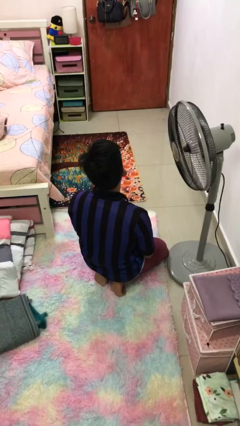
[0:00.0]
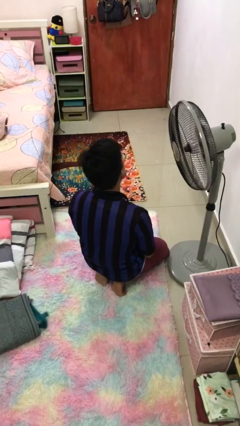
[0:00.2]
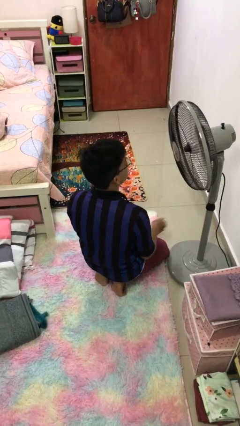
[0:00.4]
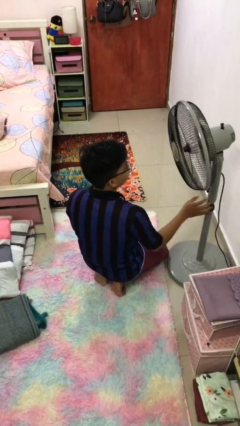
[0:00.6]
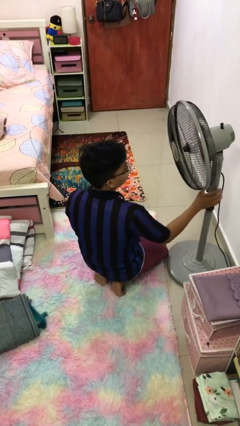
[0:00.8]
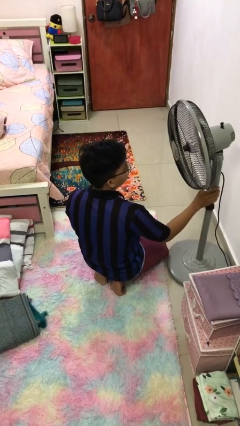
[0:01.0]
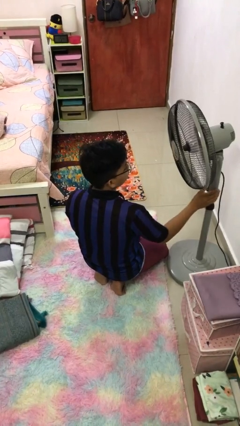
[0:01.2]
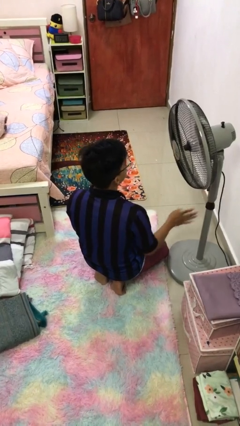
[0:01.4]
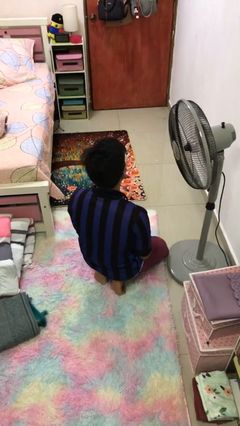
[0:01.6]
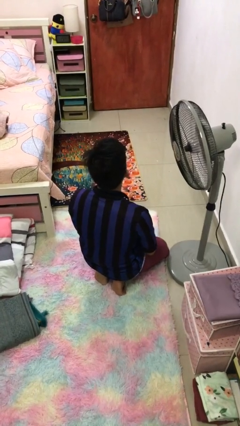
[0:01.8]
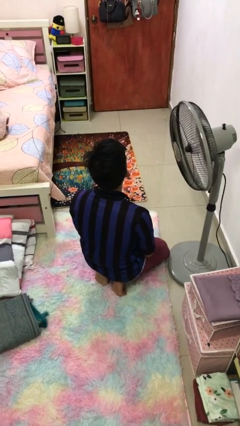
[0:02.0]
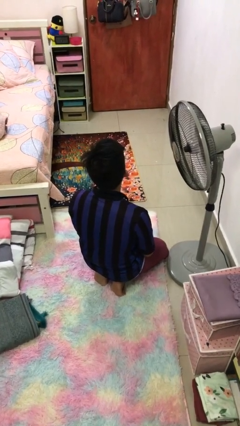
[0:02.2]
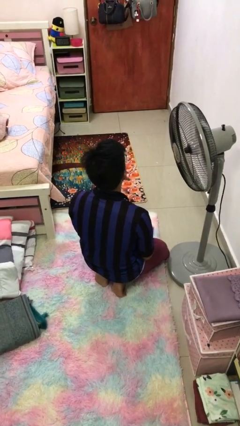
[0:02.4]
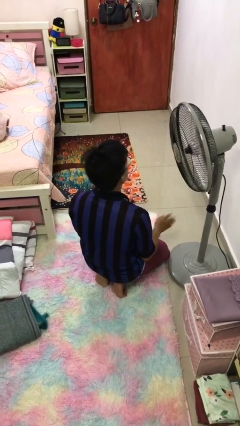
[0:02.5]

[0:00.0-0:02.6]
person turns on fan

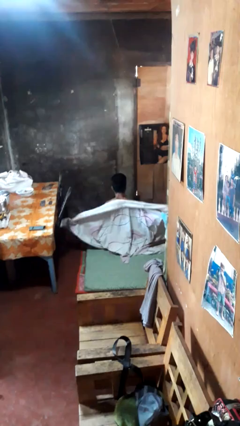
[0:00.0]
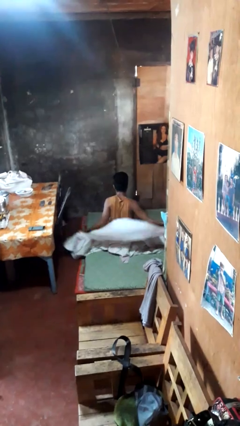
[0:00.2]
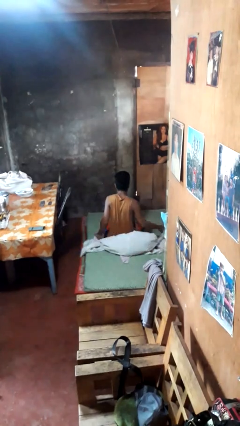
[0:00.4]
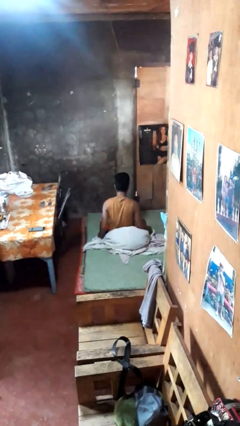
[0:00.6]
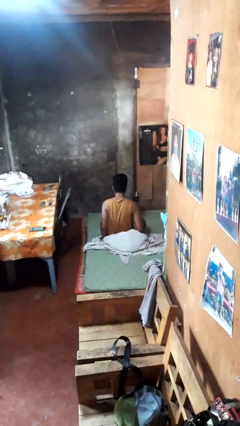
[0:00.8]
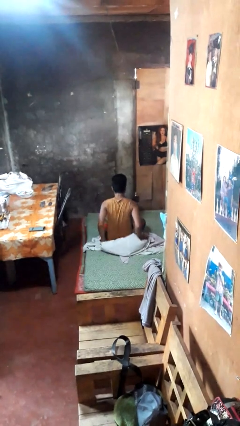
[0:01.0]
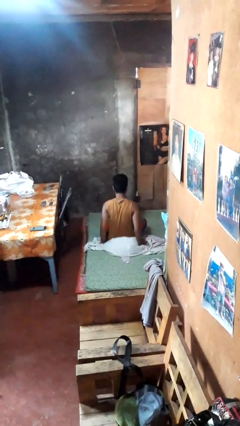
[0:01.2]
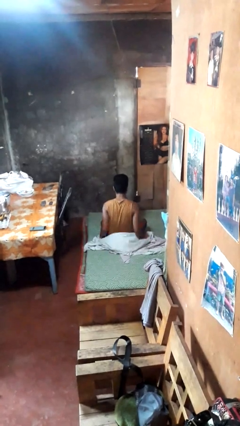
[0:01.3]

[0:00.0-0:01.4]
person uncovers with blanket

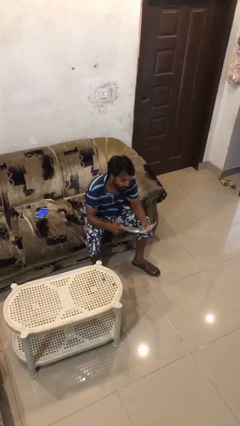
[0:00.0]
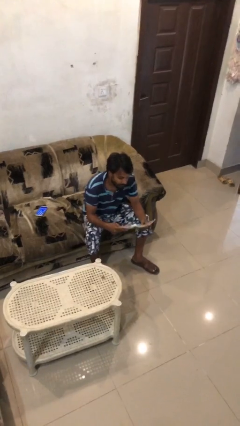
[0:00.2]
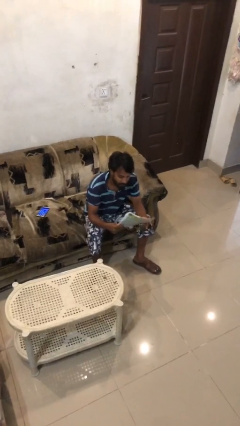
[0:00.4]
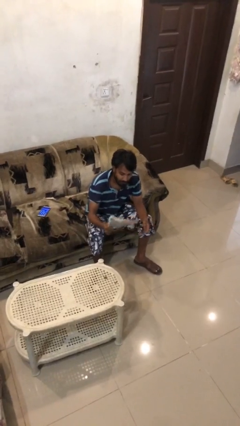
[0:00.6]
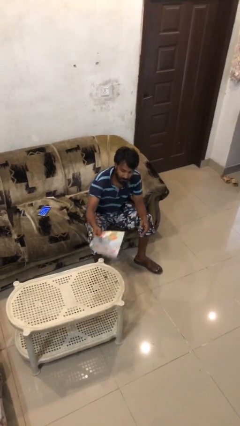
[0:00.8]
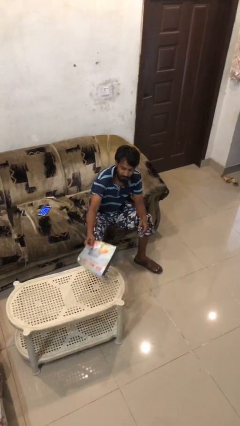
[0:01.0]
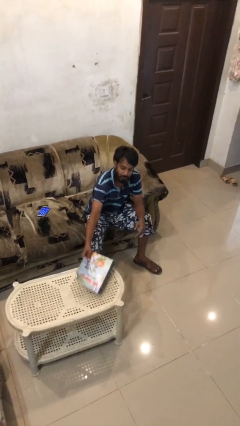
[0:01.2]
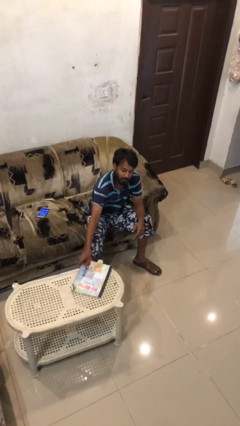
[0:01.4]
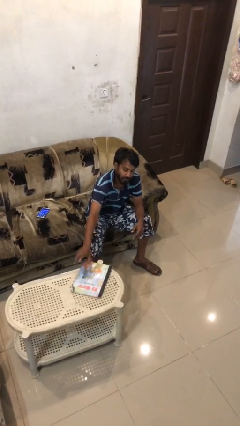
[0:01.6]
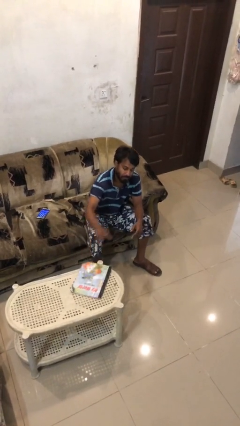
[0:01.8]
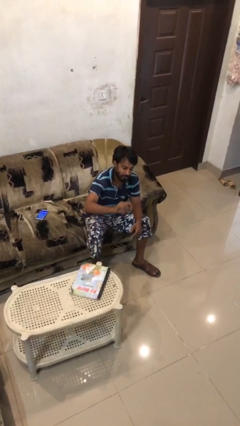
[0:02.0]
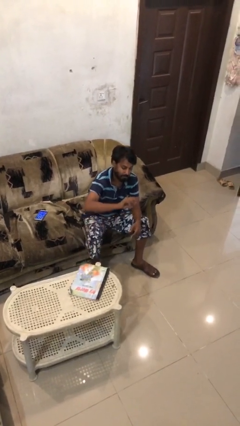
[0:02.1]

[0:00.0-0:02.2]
person puts down object on table

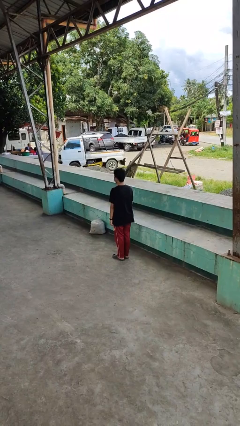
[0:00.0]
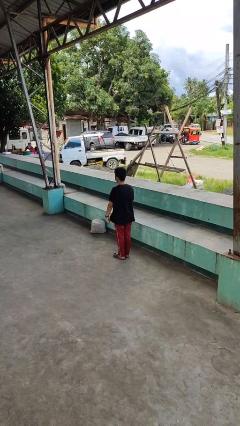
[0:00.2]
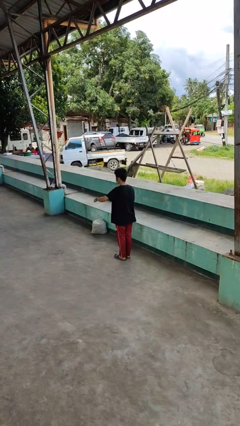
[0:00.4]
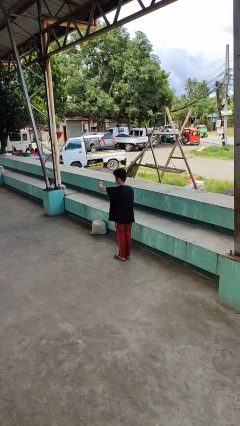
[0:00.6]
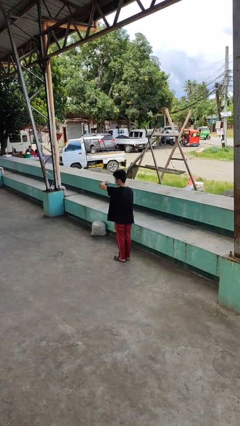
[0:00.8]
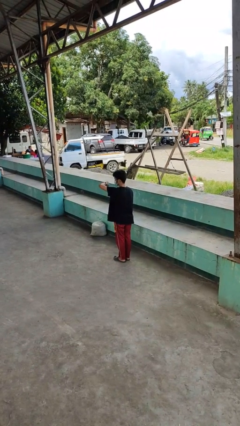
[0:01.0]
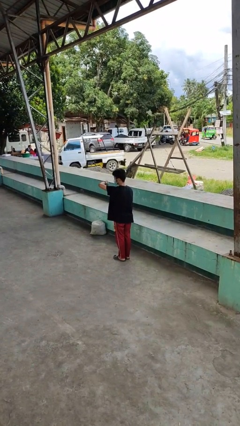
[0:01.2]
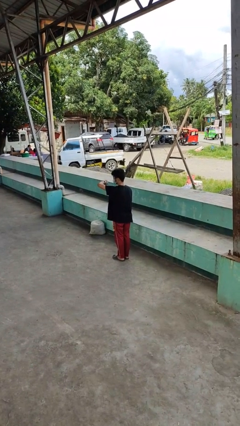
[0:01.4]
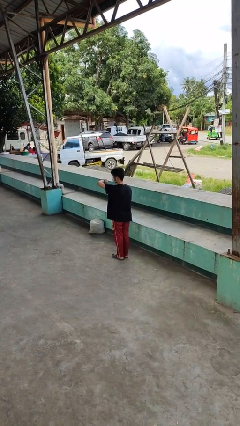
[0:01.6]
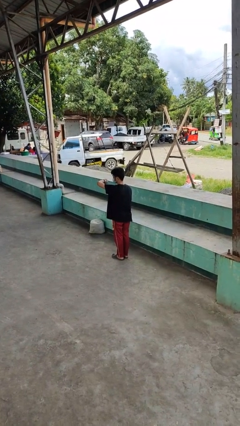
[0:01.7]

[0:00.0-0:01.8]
person looks at wristwatch

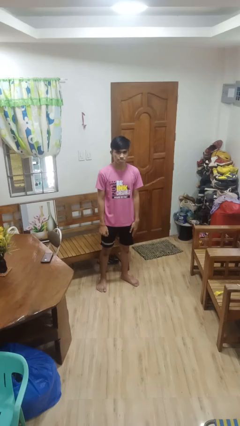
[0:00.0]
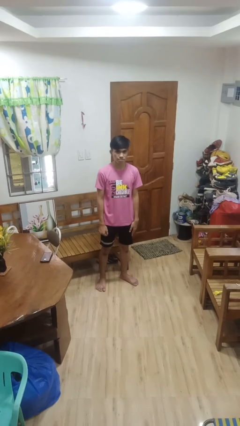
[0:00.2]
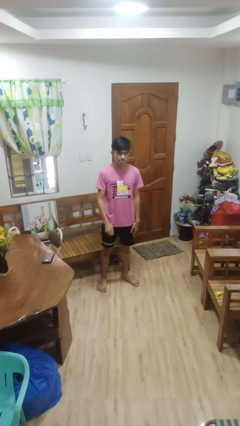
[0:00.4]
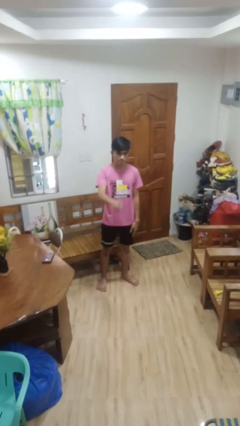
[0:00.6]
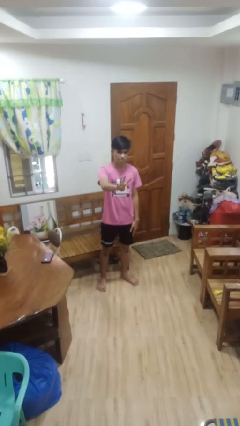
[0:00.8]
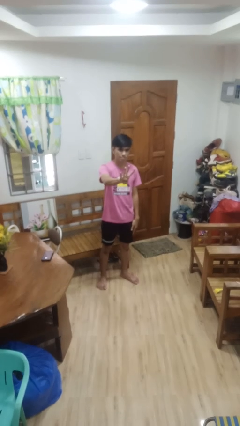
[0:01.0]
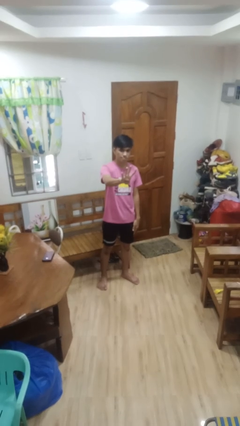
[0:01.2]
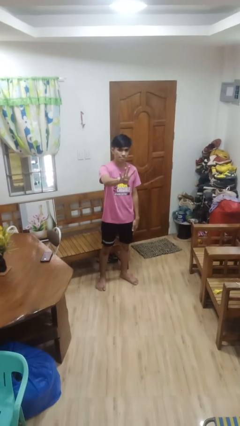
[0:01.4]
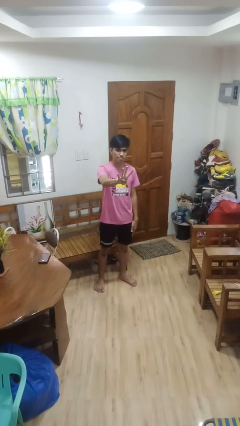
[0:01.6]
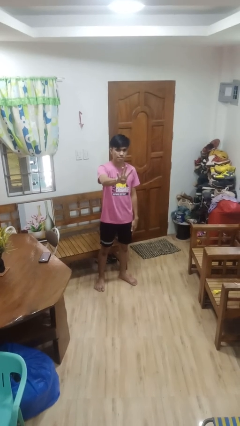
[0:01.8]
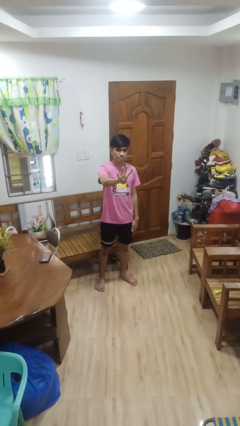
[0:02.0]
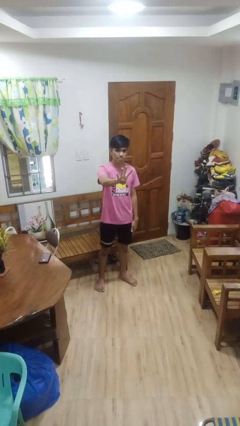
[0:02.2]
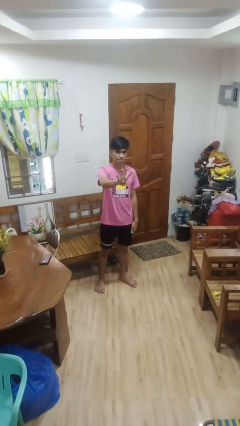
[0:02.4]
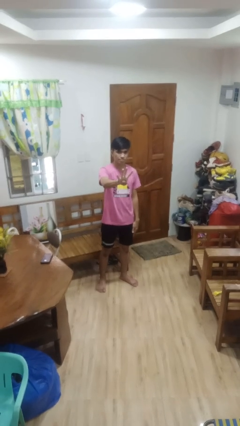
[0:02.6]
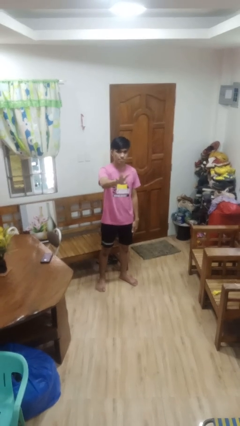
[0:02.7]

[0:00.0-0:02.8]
person gestures number four

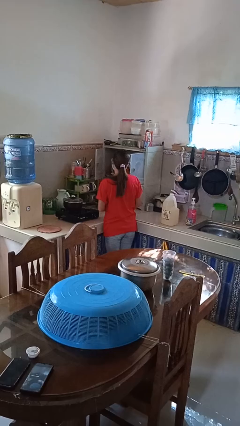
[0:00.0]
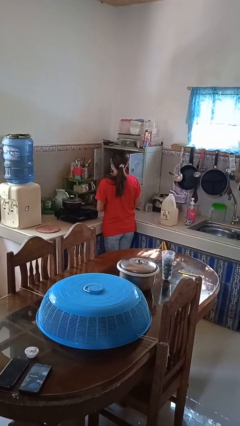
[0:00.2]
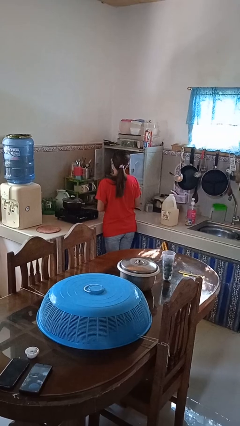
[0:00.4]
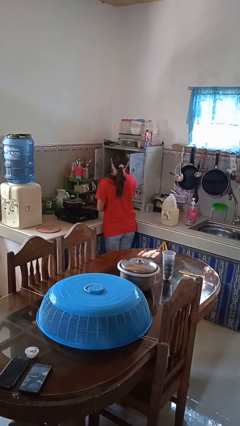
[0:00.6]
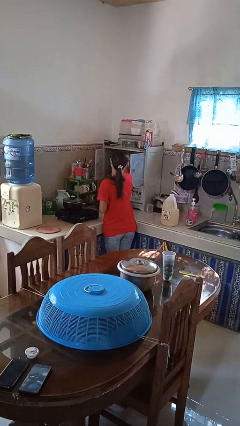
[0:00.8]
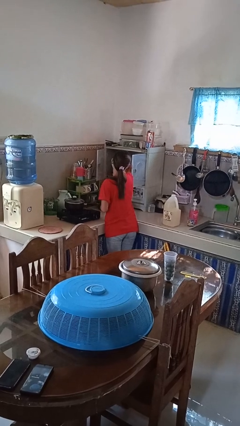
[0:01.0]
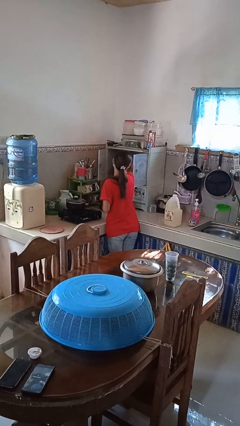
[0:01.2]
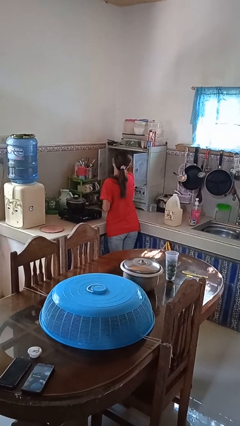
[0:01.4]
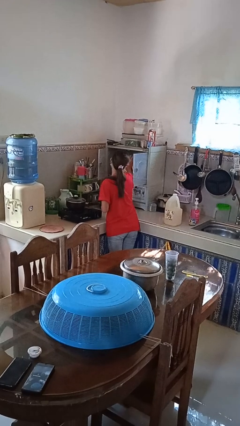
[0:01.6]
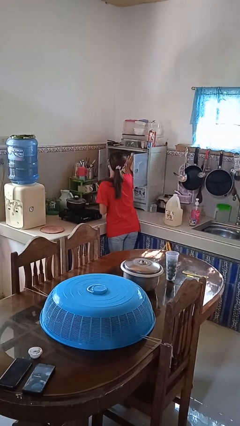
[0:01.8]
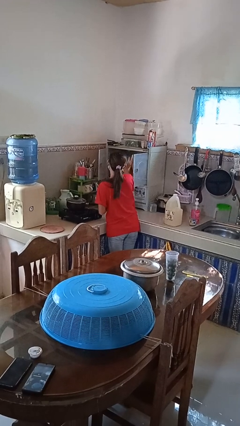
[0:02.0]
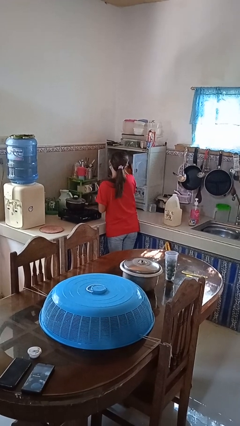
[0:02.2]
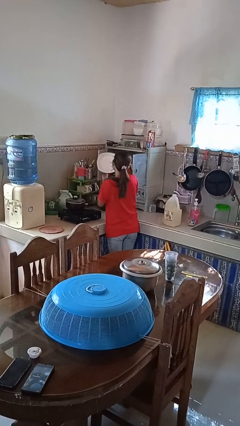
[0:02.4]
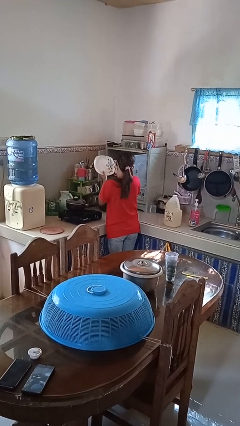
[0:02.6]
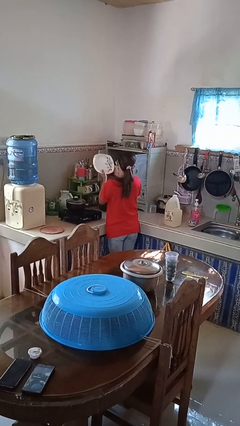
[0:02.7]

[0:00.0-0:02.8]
person takes object from cabinet

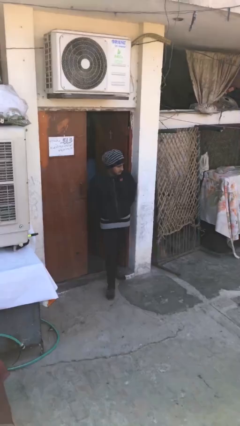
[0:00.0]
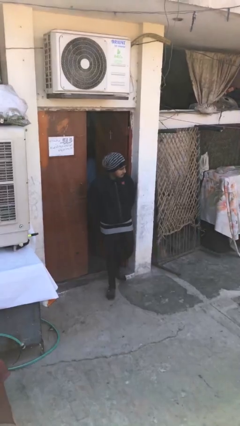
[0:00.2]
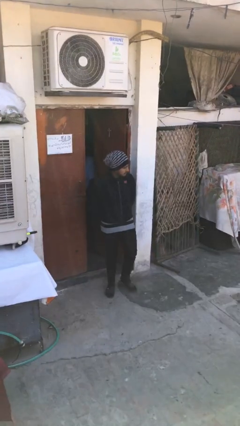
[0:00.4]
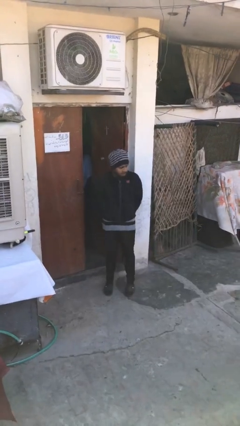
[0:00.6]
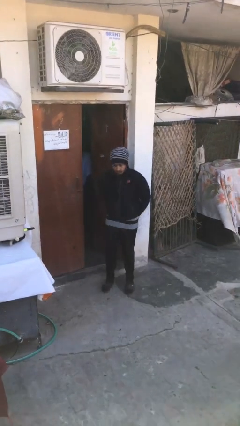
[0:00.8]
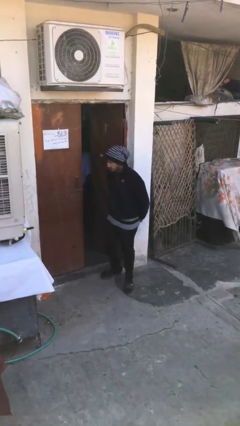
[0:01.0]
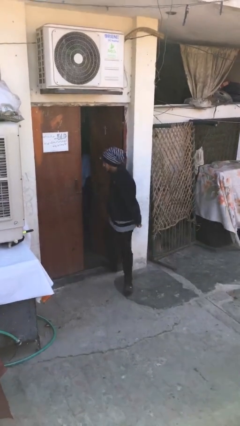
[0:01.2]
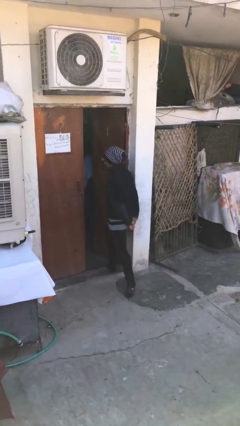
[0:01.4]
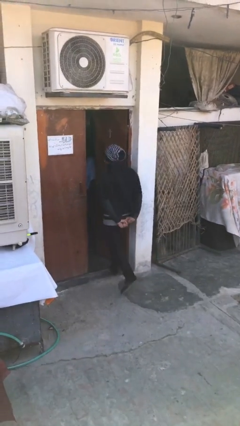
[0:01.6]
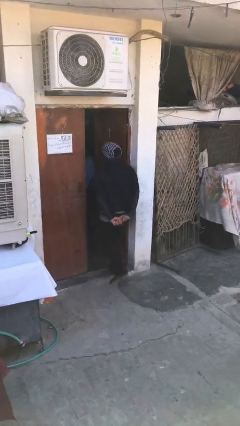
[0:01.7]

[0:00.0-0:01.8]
person exits scene through structure

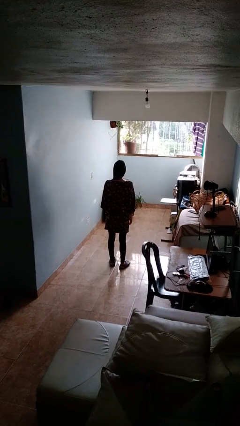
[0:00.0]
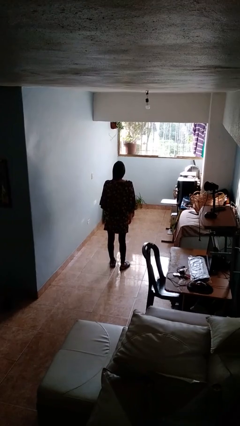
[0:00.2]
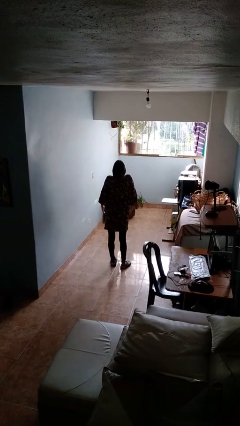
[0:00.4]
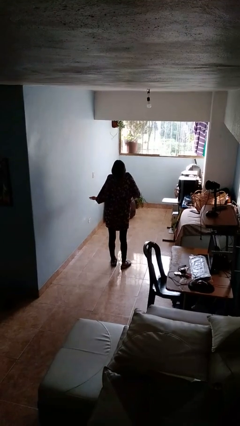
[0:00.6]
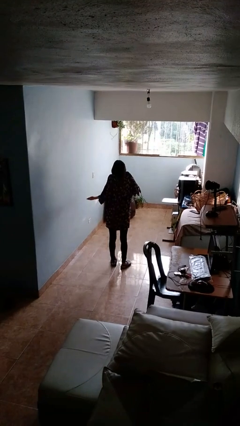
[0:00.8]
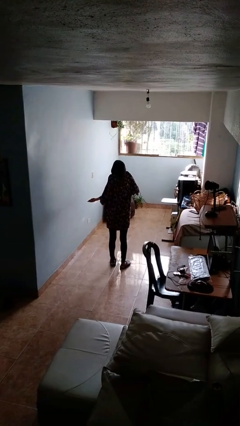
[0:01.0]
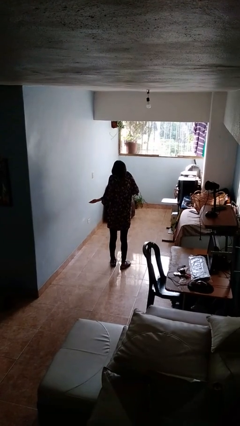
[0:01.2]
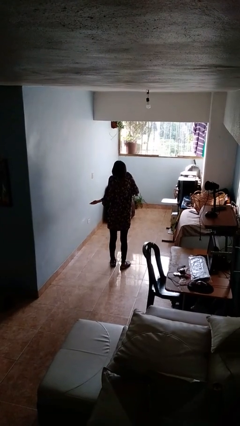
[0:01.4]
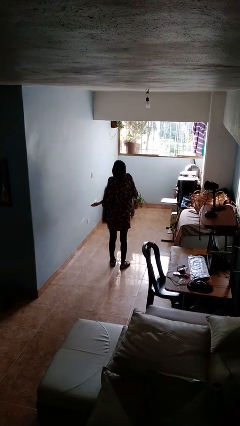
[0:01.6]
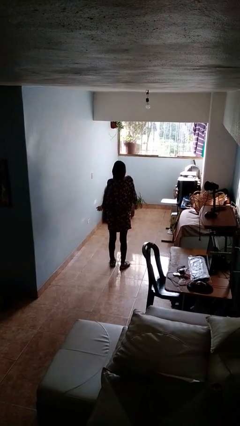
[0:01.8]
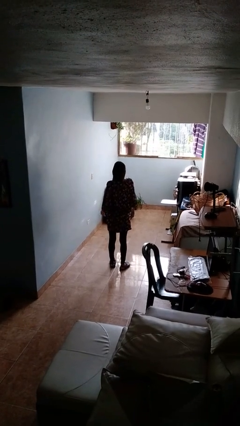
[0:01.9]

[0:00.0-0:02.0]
person shrugs
